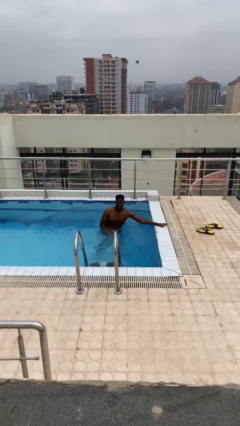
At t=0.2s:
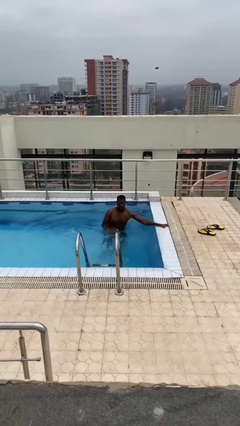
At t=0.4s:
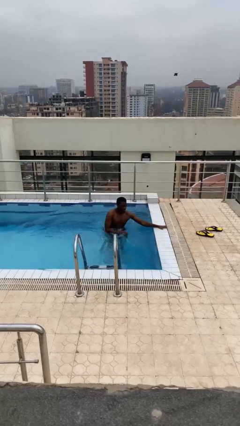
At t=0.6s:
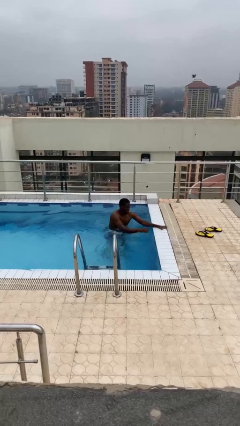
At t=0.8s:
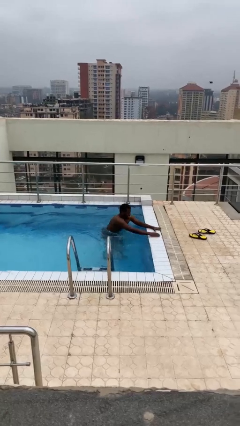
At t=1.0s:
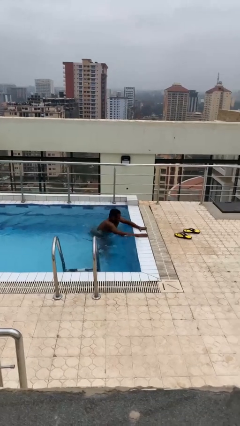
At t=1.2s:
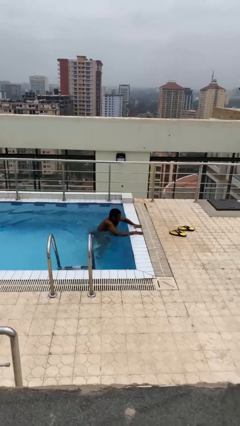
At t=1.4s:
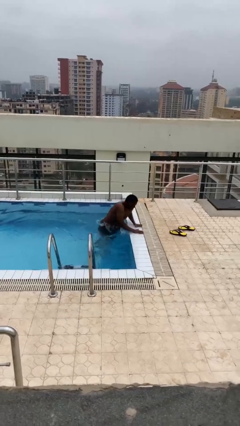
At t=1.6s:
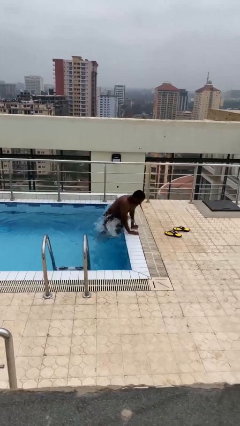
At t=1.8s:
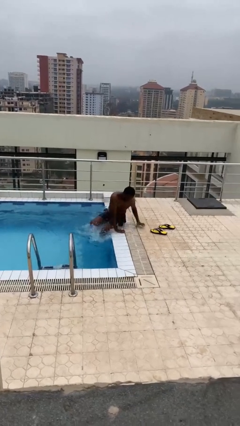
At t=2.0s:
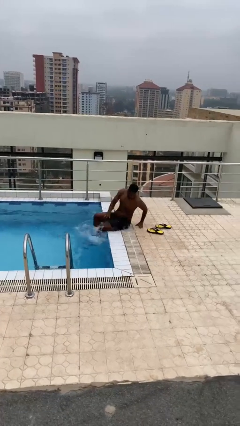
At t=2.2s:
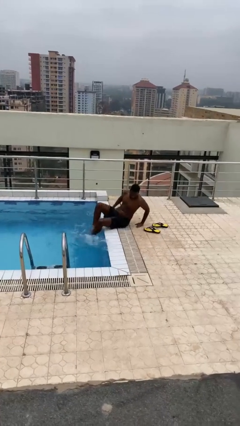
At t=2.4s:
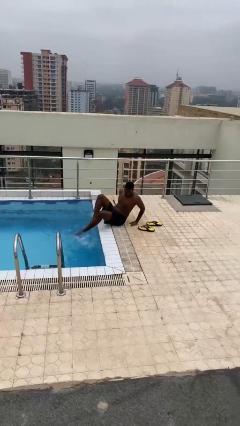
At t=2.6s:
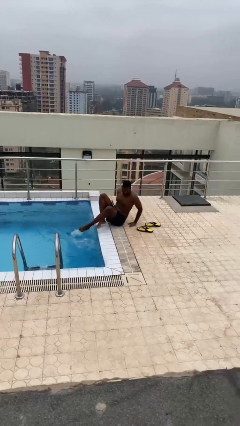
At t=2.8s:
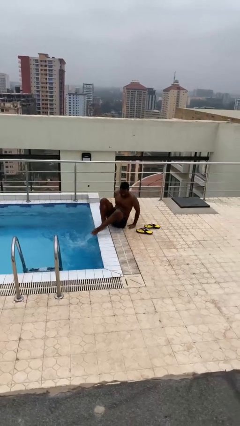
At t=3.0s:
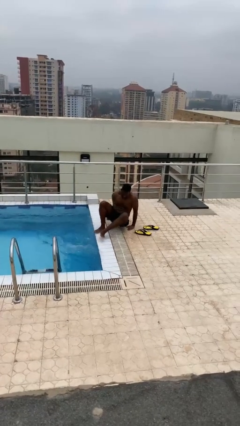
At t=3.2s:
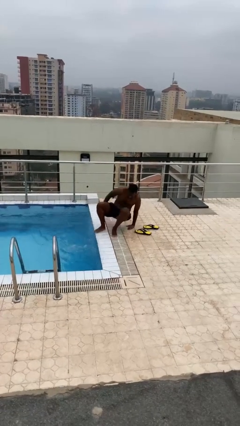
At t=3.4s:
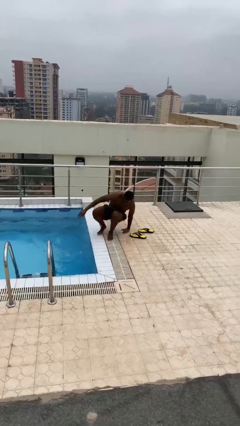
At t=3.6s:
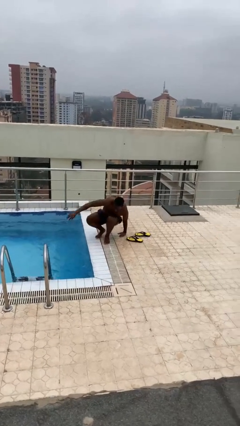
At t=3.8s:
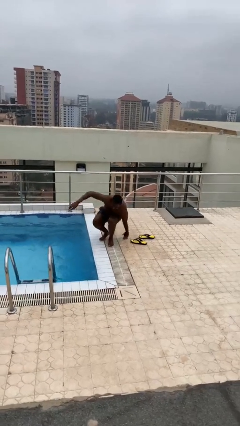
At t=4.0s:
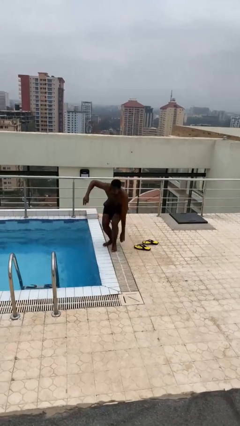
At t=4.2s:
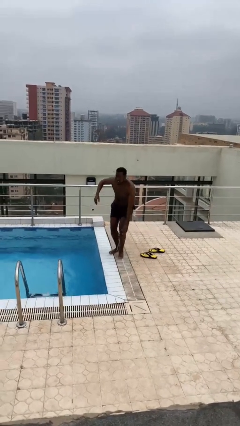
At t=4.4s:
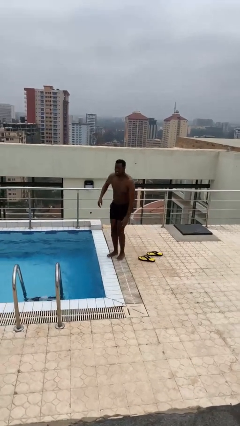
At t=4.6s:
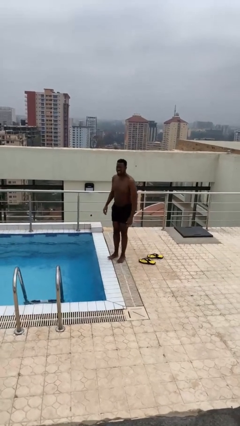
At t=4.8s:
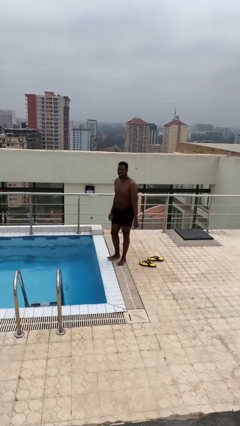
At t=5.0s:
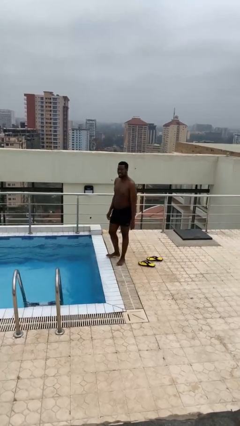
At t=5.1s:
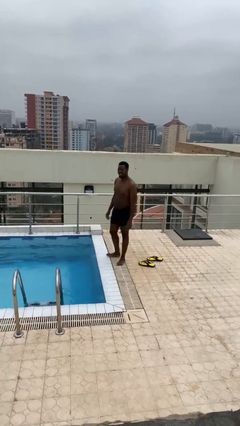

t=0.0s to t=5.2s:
person exits pool

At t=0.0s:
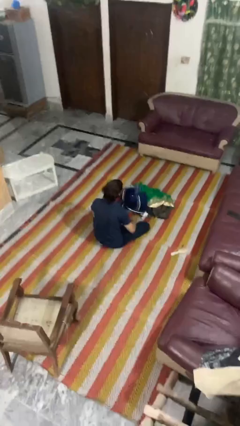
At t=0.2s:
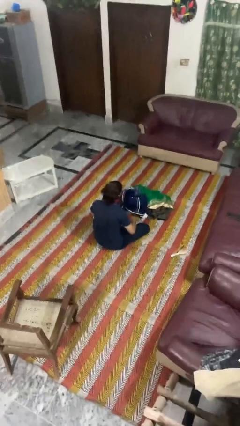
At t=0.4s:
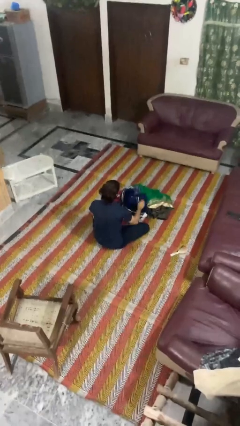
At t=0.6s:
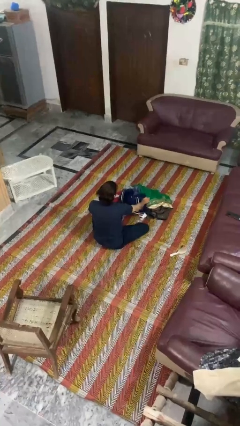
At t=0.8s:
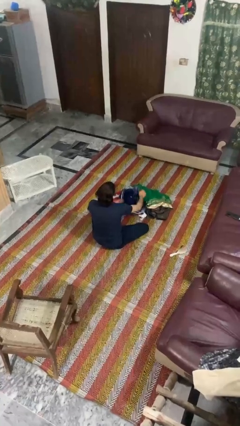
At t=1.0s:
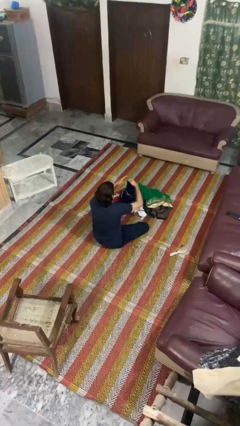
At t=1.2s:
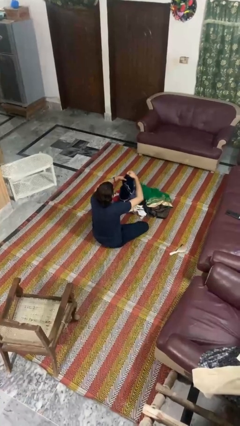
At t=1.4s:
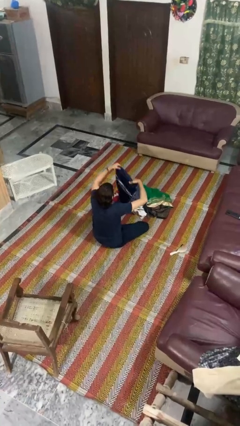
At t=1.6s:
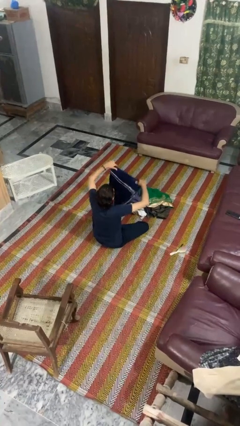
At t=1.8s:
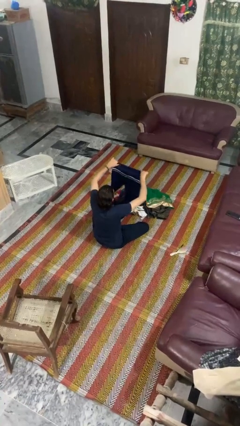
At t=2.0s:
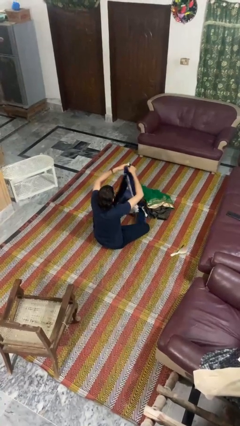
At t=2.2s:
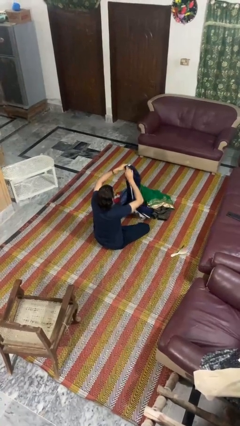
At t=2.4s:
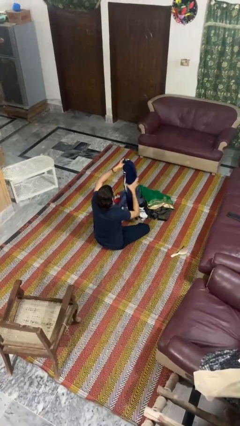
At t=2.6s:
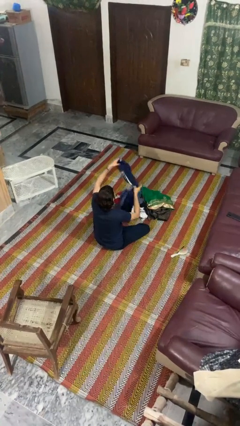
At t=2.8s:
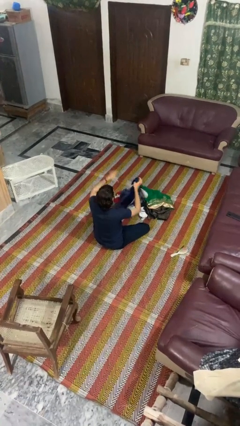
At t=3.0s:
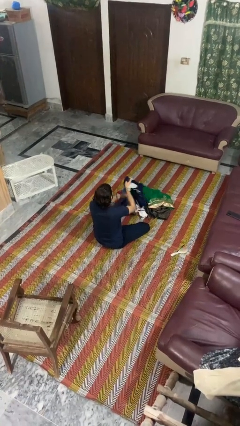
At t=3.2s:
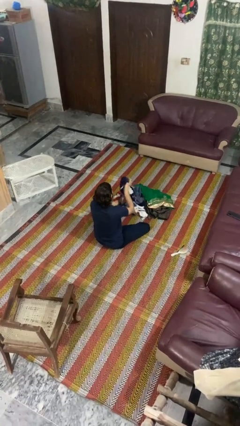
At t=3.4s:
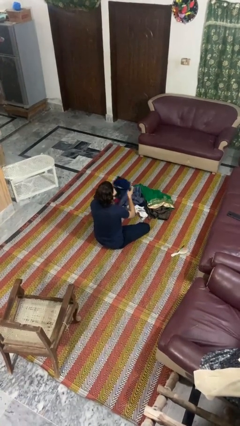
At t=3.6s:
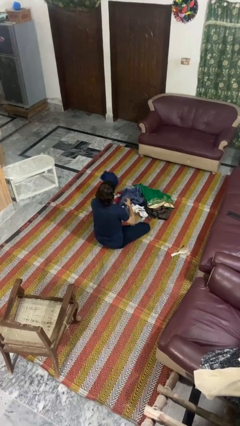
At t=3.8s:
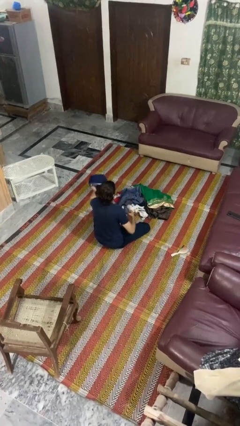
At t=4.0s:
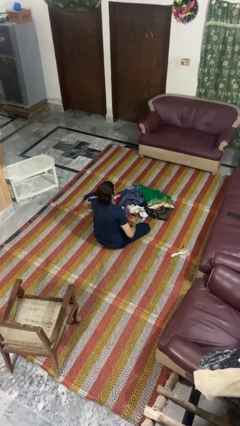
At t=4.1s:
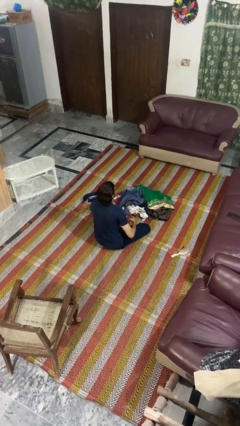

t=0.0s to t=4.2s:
person folds pants

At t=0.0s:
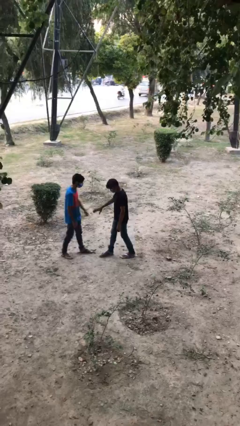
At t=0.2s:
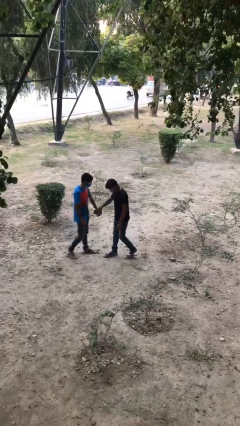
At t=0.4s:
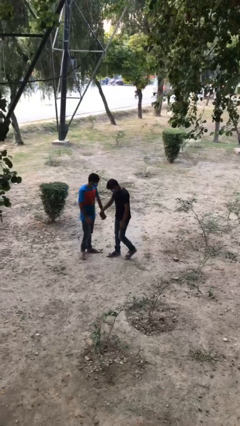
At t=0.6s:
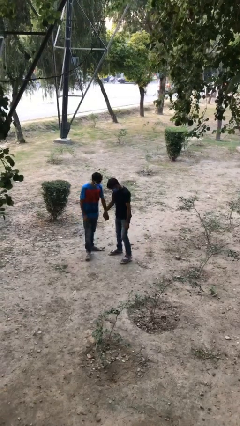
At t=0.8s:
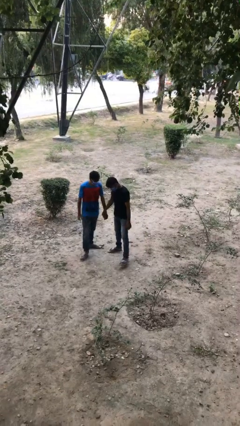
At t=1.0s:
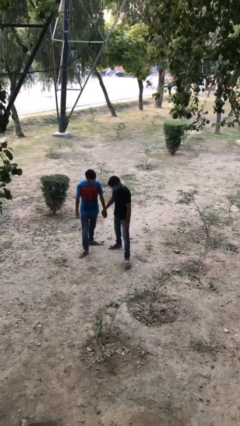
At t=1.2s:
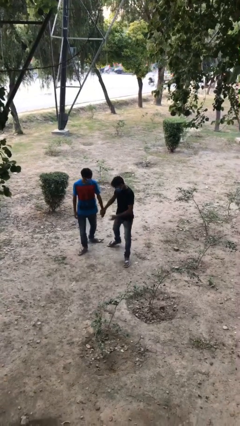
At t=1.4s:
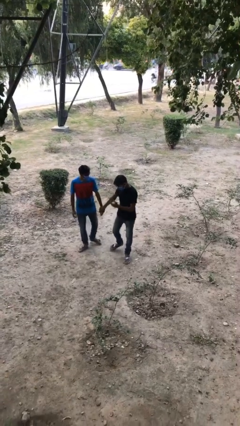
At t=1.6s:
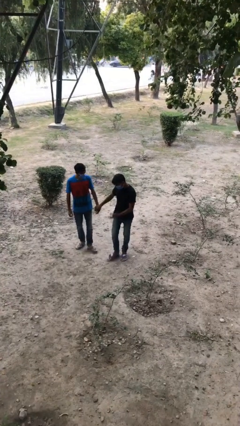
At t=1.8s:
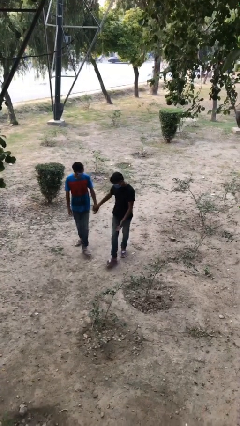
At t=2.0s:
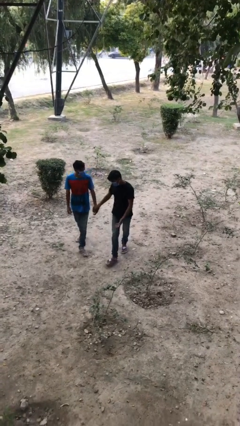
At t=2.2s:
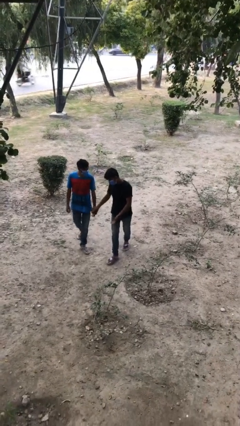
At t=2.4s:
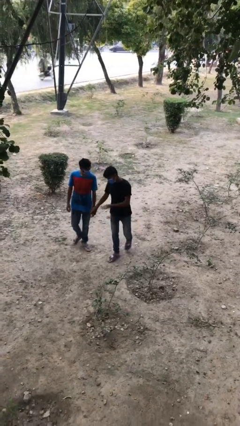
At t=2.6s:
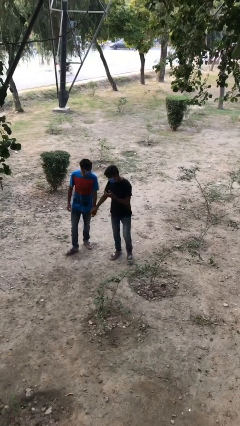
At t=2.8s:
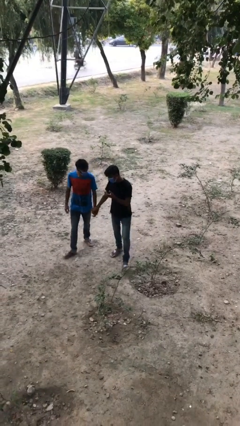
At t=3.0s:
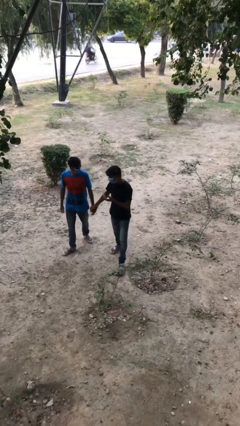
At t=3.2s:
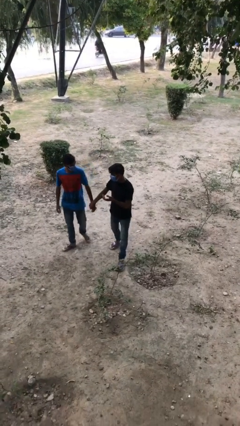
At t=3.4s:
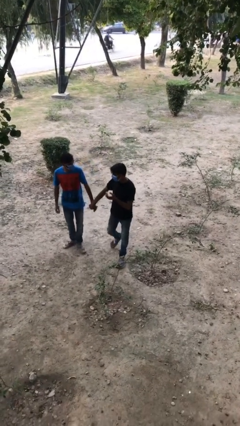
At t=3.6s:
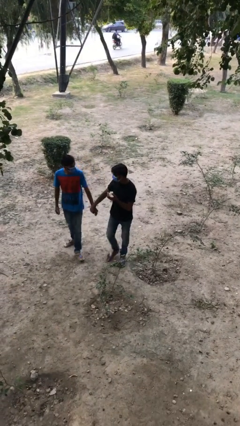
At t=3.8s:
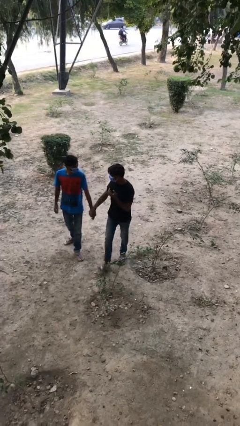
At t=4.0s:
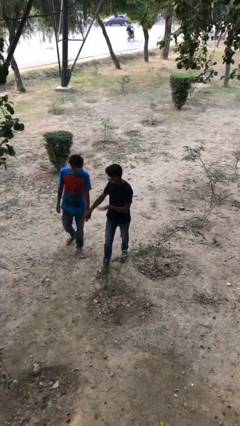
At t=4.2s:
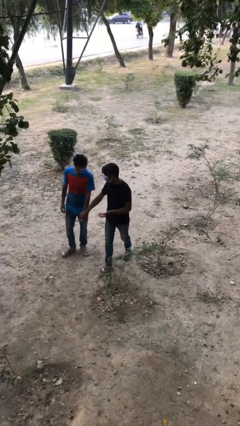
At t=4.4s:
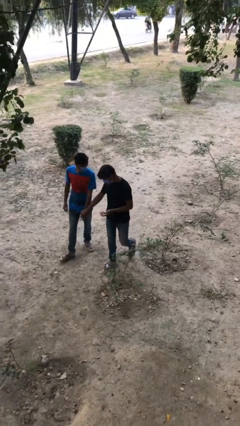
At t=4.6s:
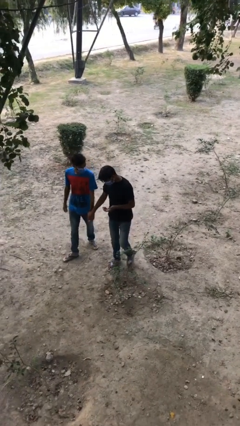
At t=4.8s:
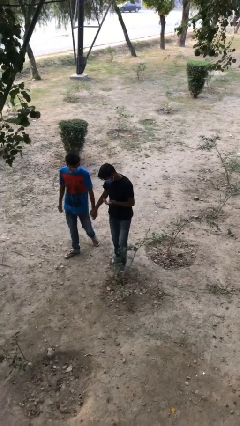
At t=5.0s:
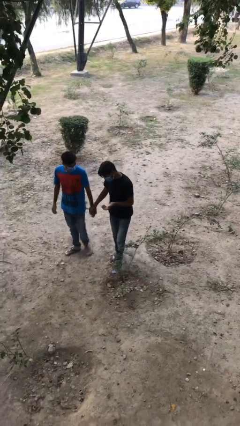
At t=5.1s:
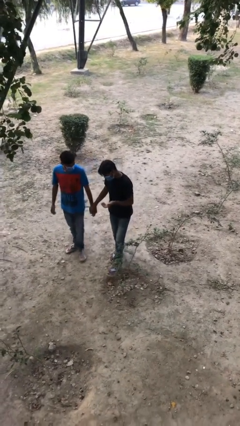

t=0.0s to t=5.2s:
person holds hand

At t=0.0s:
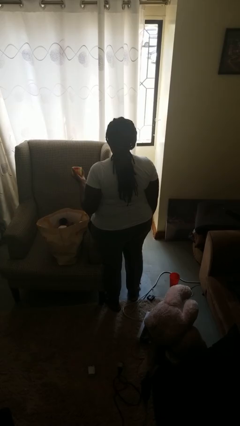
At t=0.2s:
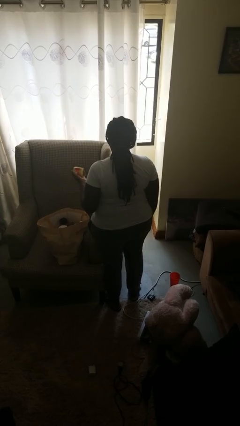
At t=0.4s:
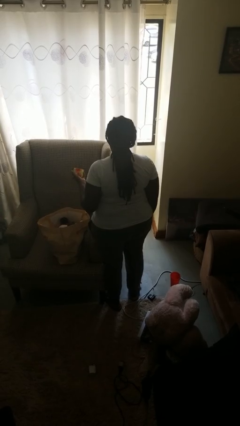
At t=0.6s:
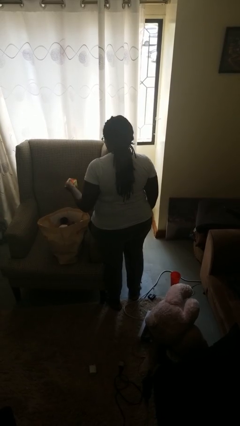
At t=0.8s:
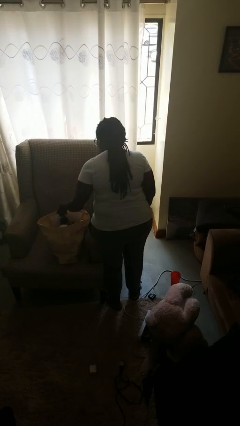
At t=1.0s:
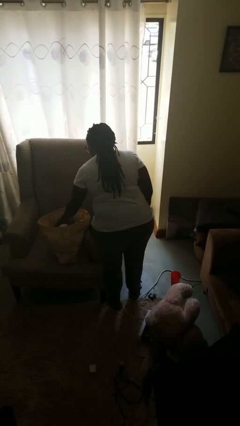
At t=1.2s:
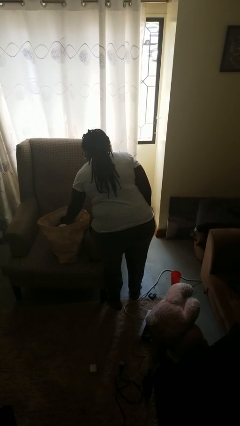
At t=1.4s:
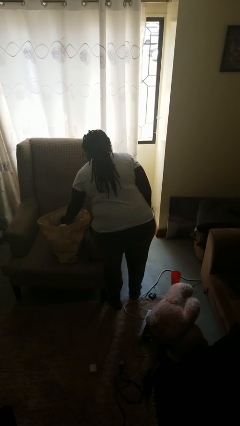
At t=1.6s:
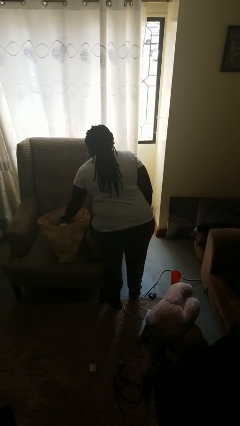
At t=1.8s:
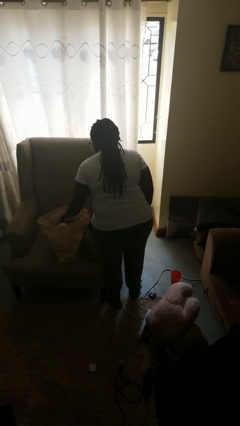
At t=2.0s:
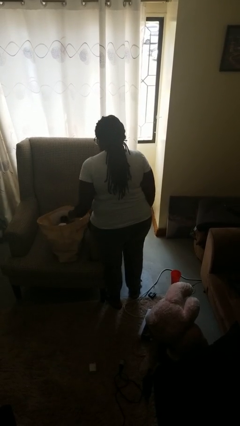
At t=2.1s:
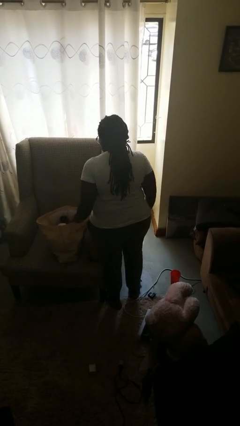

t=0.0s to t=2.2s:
person puts object into bag

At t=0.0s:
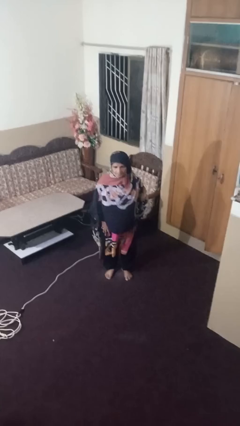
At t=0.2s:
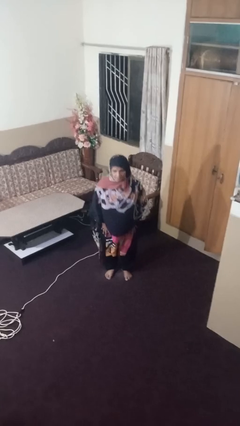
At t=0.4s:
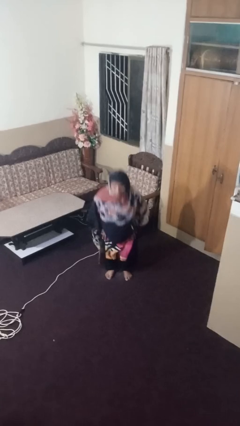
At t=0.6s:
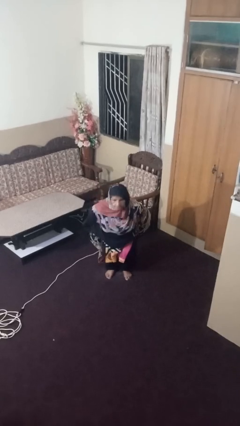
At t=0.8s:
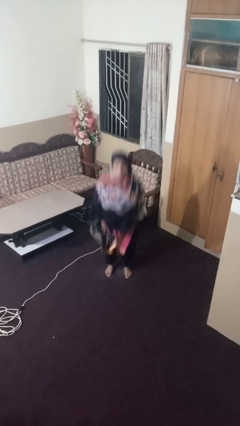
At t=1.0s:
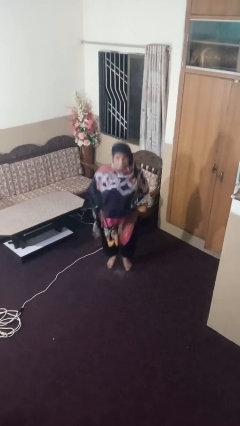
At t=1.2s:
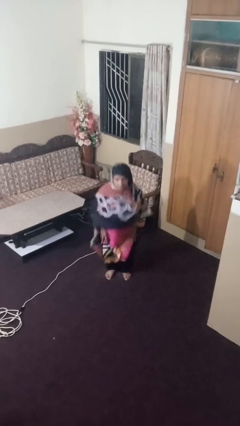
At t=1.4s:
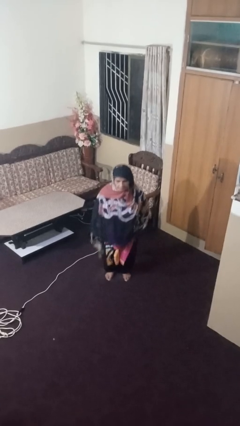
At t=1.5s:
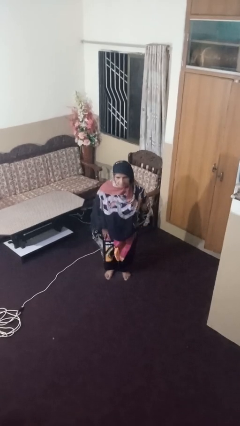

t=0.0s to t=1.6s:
person jumps
